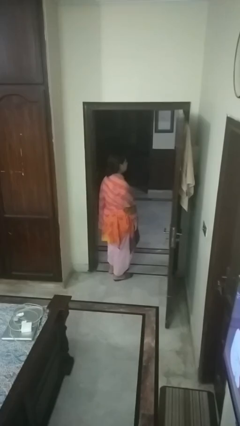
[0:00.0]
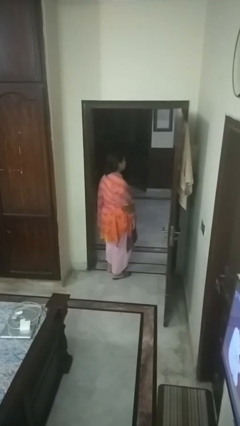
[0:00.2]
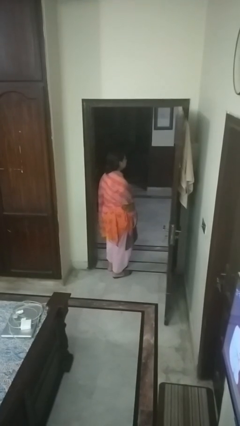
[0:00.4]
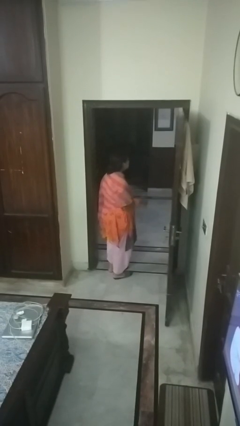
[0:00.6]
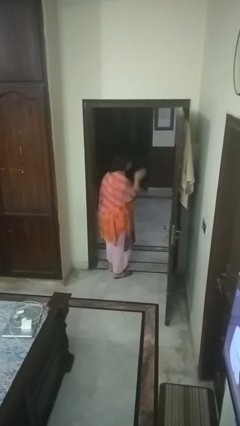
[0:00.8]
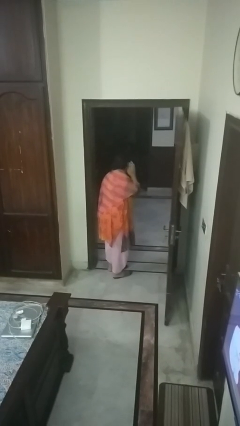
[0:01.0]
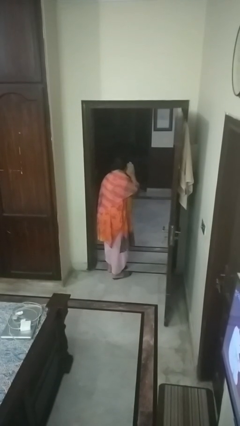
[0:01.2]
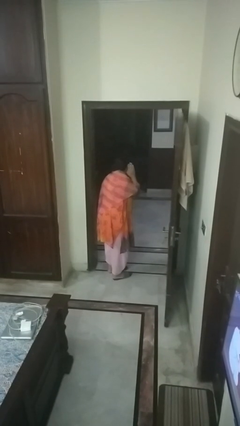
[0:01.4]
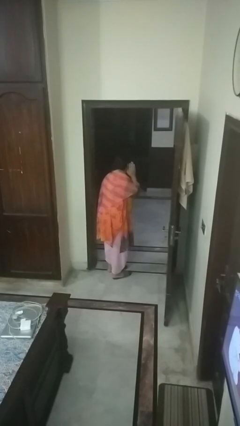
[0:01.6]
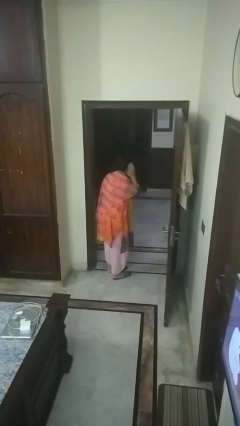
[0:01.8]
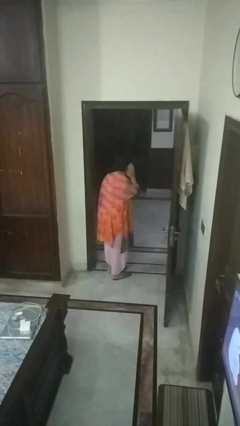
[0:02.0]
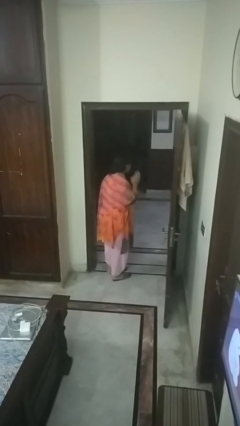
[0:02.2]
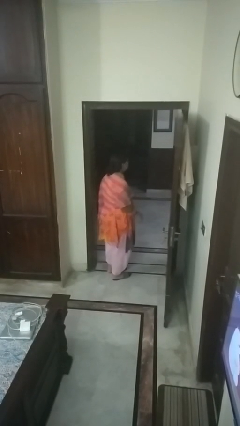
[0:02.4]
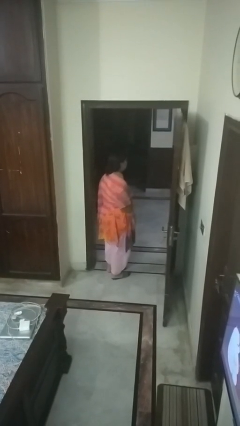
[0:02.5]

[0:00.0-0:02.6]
person gestures listen closely

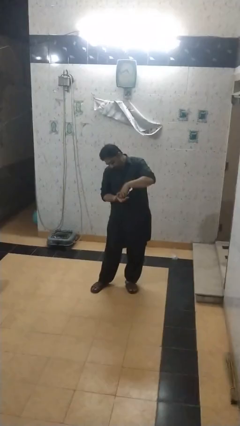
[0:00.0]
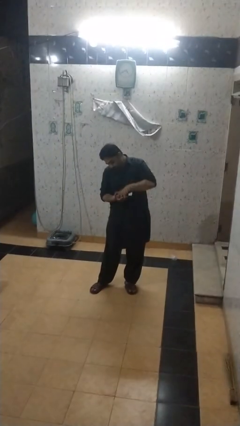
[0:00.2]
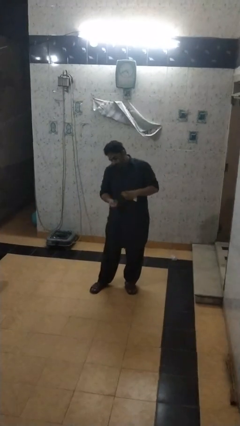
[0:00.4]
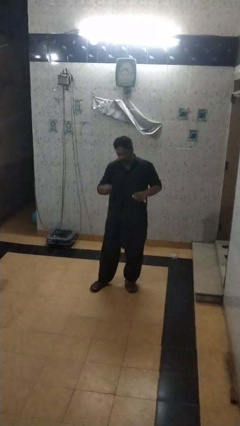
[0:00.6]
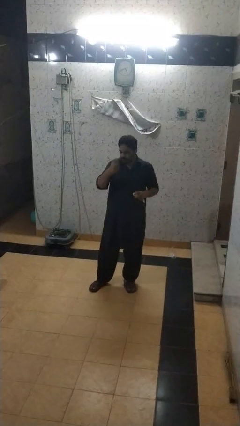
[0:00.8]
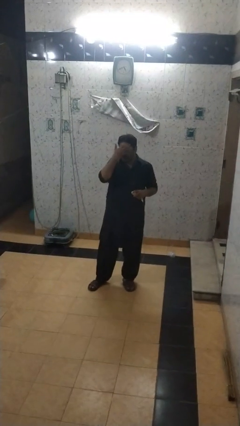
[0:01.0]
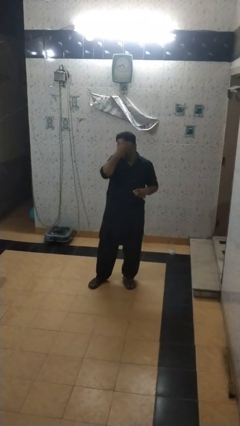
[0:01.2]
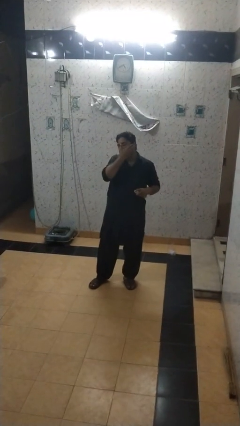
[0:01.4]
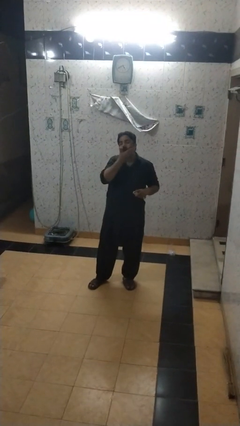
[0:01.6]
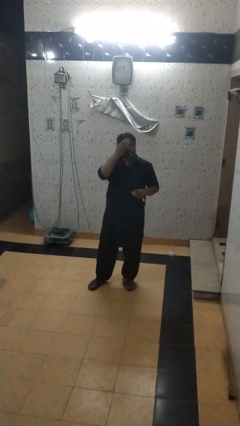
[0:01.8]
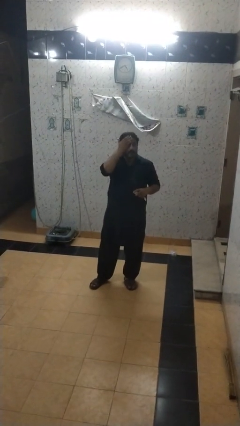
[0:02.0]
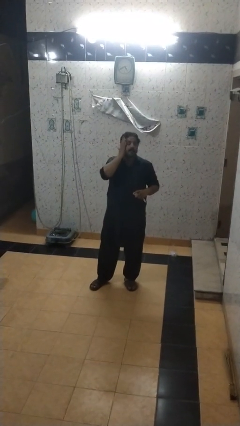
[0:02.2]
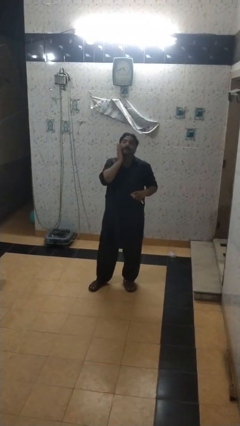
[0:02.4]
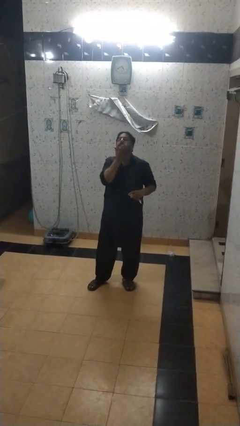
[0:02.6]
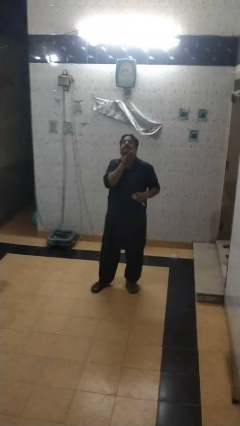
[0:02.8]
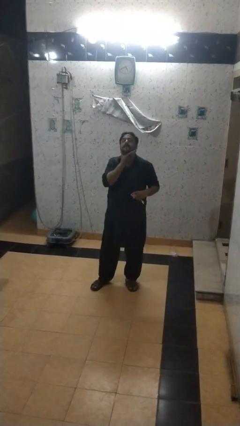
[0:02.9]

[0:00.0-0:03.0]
person applies facial moisturizer

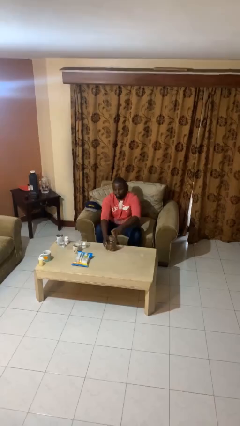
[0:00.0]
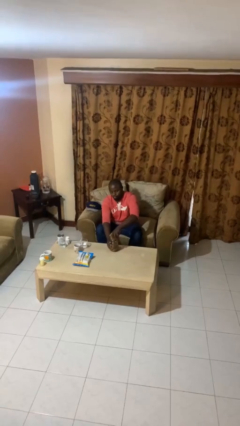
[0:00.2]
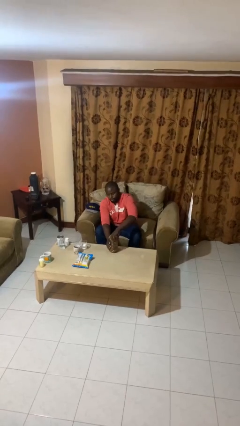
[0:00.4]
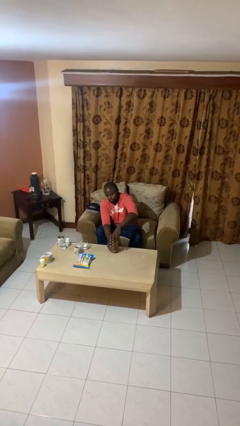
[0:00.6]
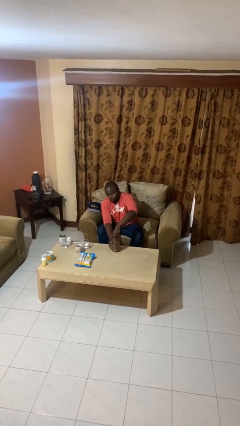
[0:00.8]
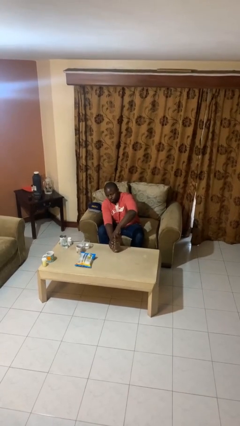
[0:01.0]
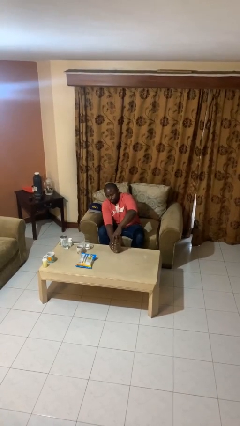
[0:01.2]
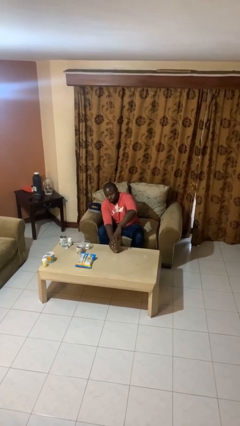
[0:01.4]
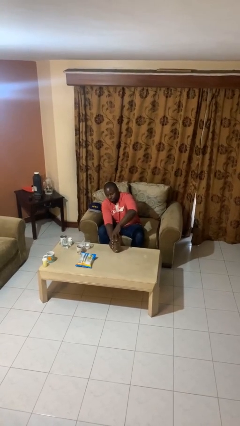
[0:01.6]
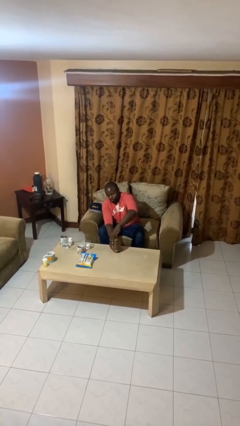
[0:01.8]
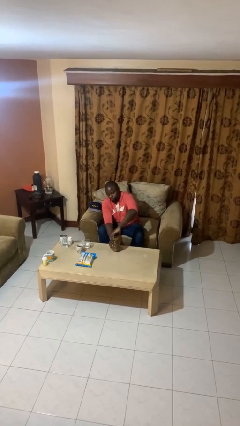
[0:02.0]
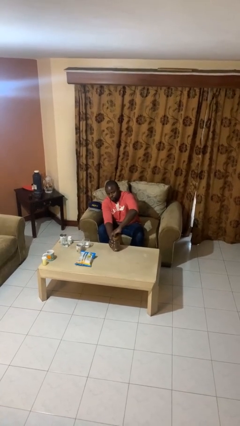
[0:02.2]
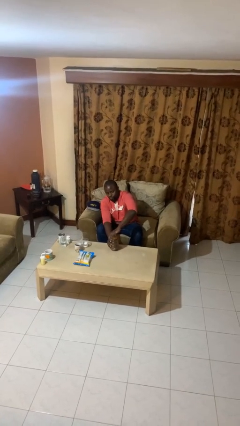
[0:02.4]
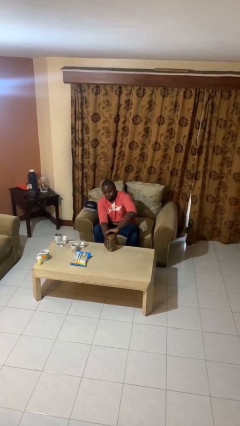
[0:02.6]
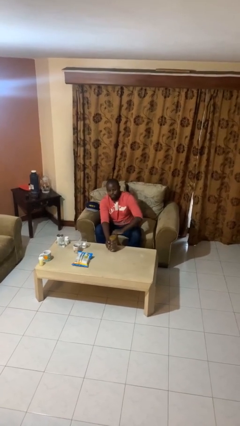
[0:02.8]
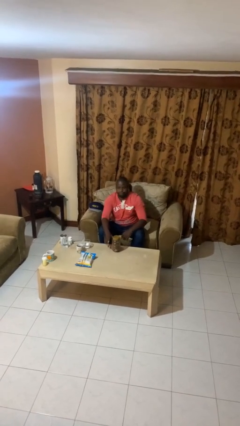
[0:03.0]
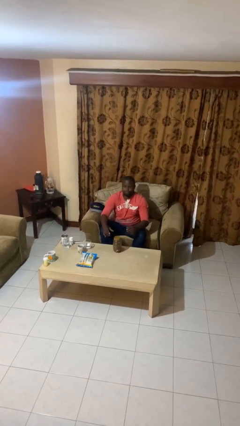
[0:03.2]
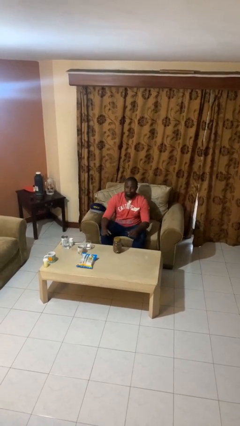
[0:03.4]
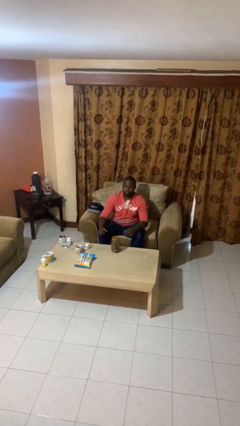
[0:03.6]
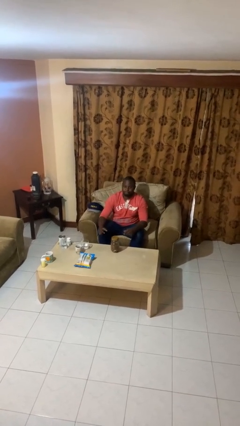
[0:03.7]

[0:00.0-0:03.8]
person closes jar

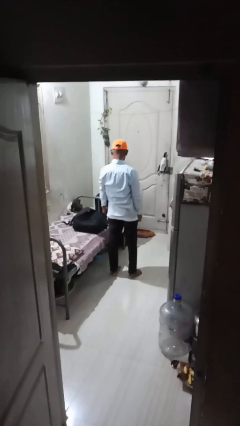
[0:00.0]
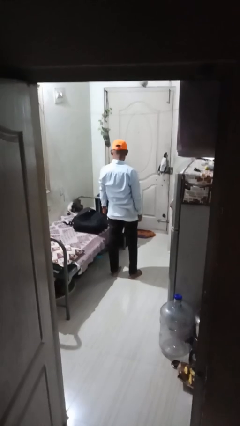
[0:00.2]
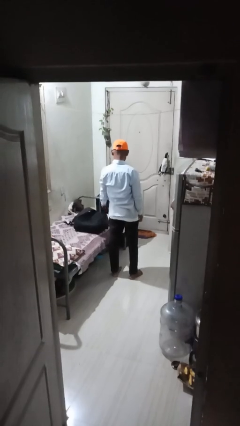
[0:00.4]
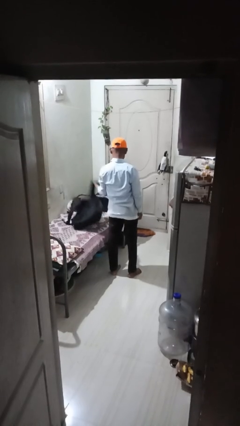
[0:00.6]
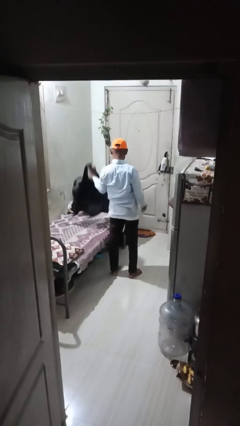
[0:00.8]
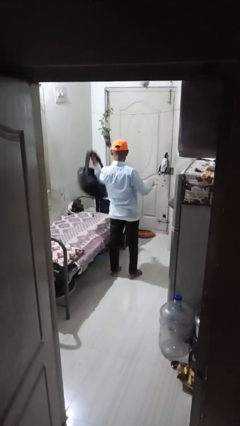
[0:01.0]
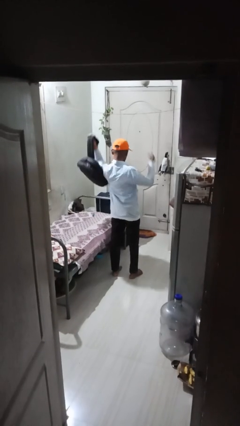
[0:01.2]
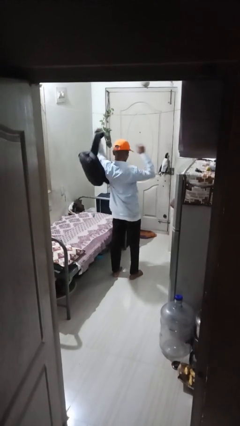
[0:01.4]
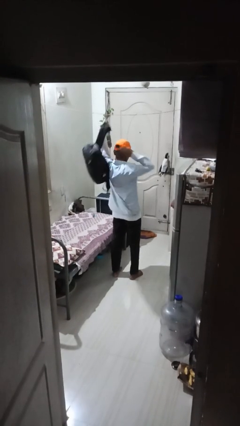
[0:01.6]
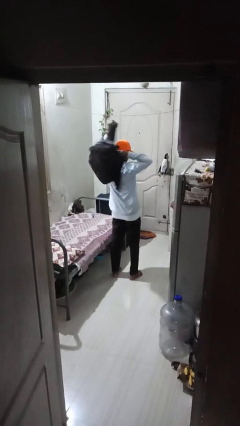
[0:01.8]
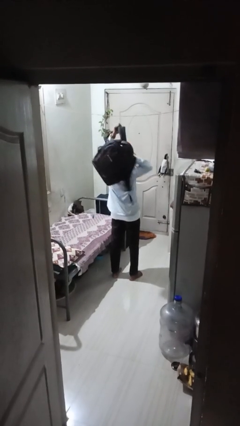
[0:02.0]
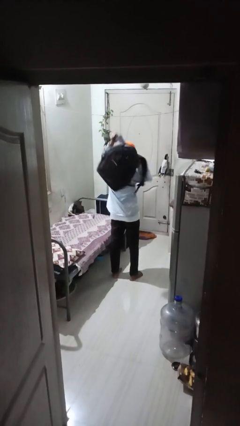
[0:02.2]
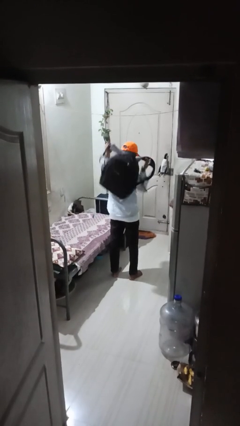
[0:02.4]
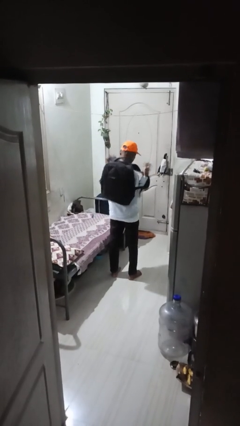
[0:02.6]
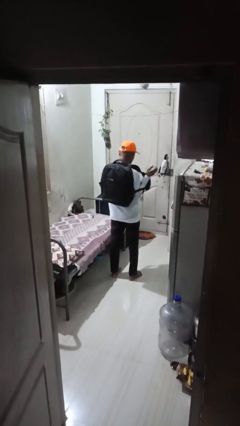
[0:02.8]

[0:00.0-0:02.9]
person puts on backpack

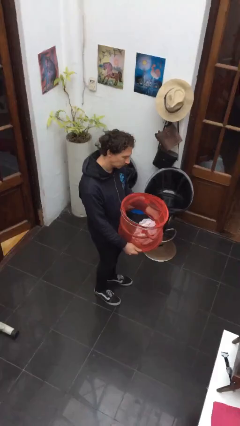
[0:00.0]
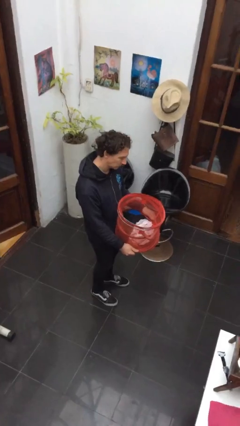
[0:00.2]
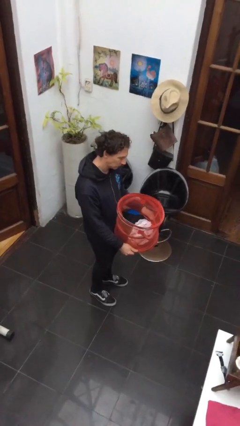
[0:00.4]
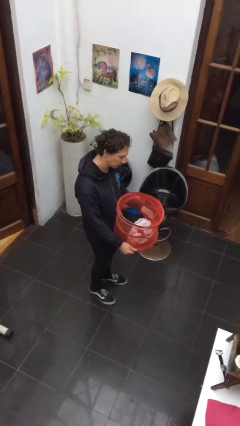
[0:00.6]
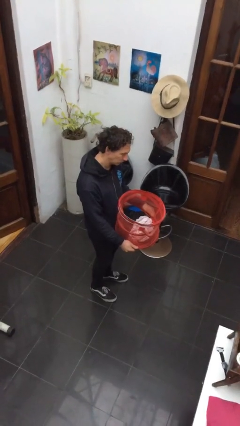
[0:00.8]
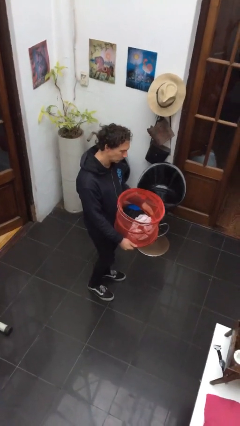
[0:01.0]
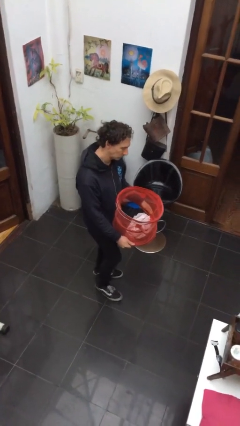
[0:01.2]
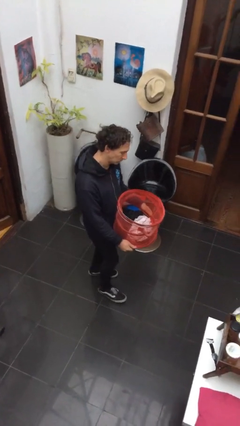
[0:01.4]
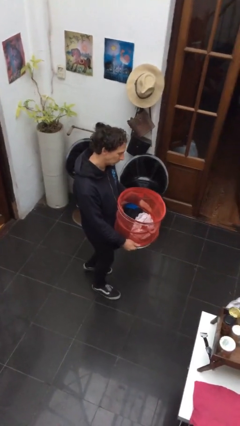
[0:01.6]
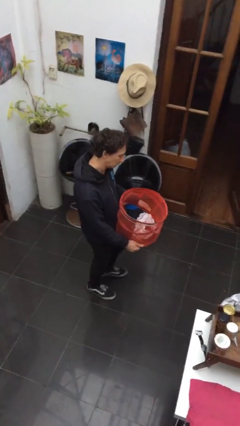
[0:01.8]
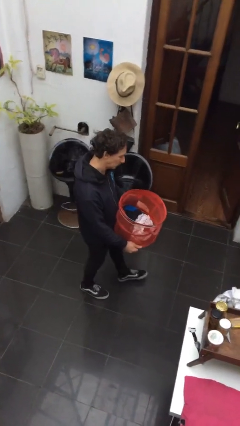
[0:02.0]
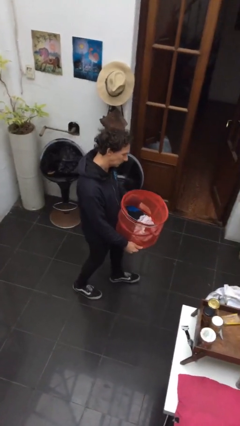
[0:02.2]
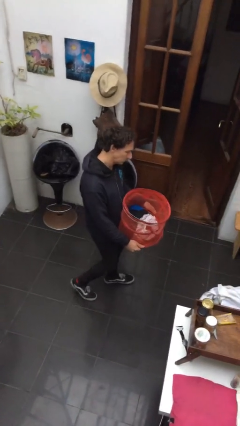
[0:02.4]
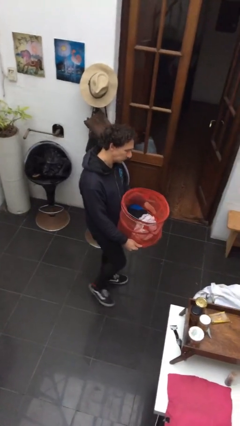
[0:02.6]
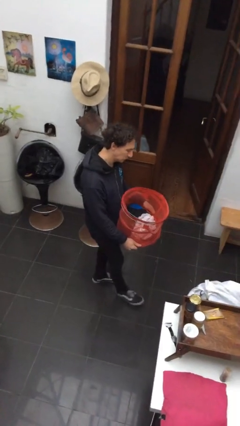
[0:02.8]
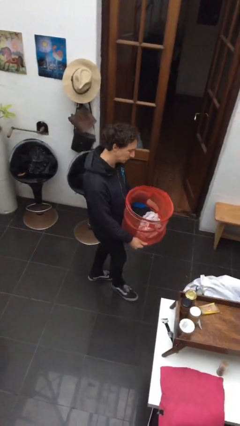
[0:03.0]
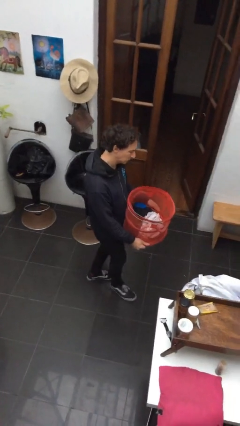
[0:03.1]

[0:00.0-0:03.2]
person carries laundry basket

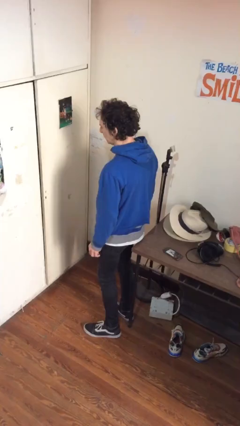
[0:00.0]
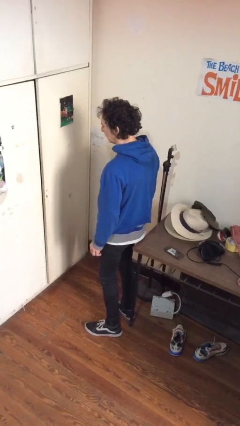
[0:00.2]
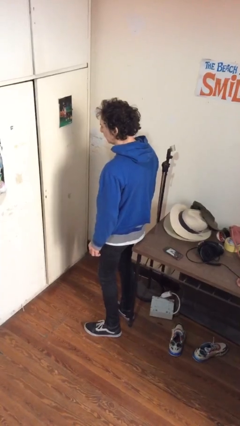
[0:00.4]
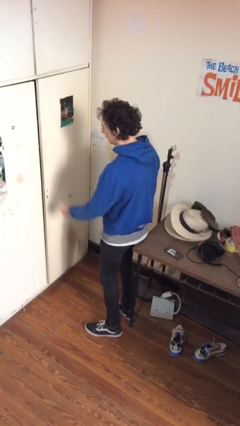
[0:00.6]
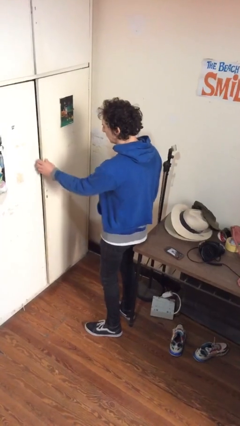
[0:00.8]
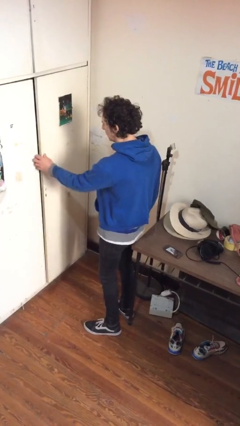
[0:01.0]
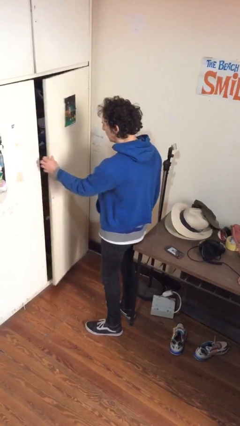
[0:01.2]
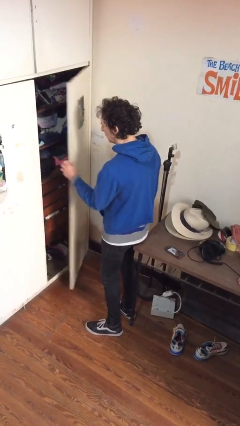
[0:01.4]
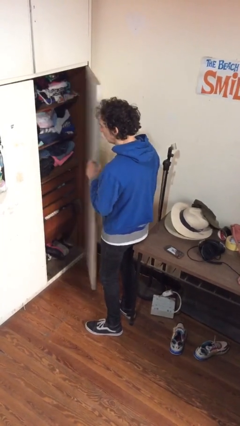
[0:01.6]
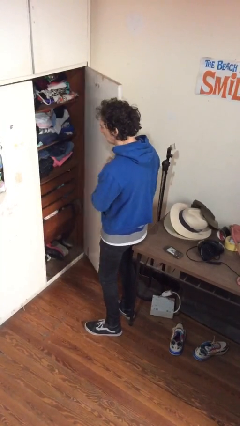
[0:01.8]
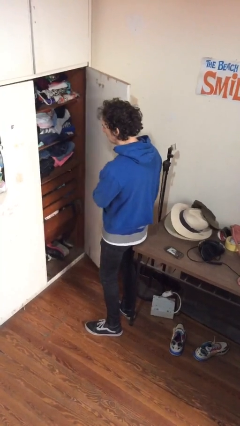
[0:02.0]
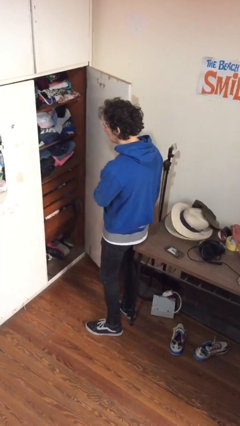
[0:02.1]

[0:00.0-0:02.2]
person opens closet door
